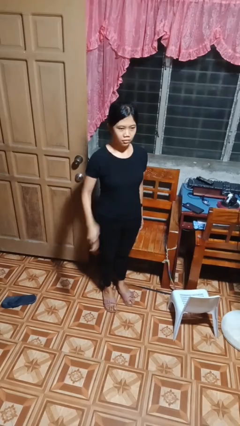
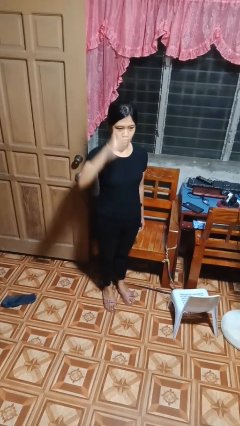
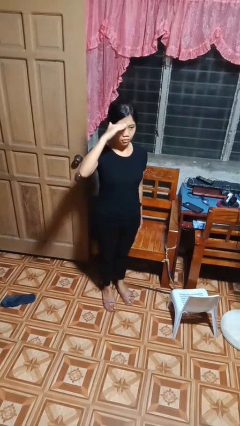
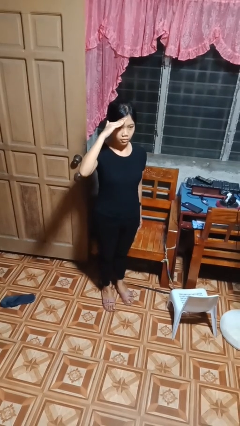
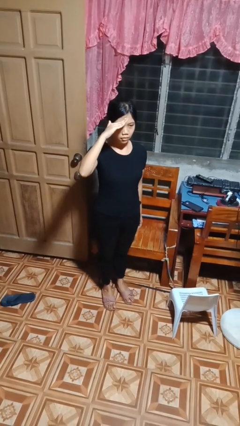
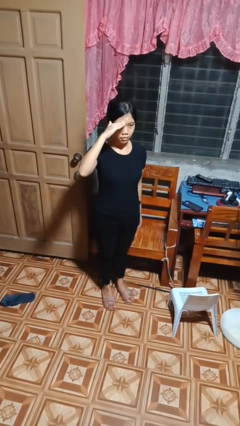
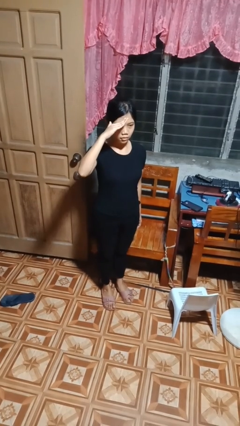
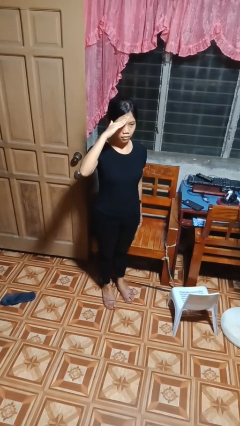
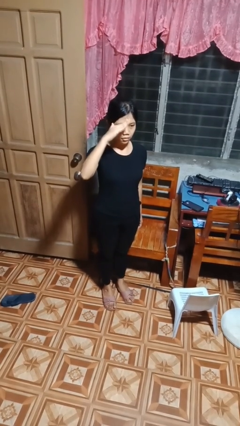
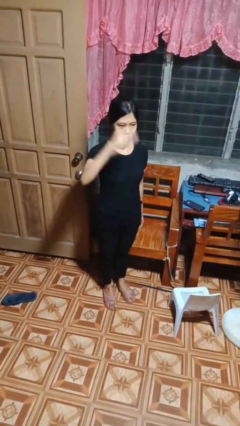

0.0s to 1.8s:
person salutes

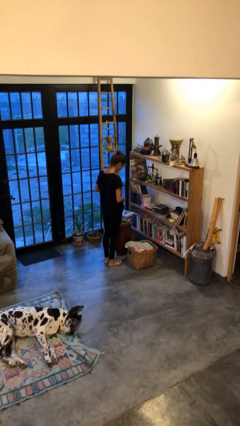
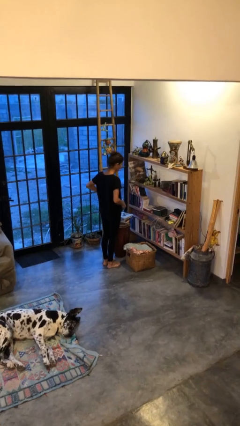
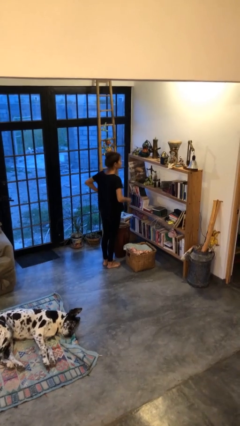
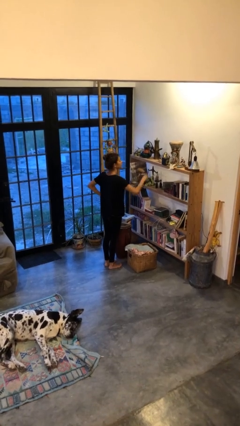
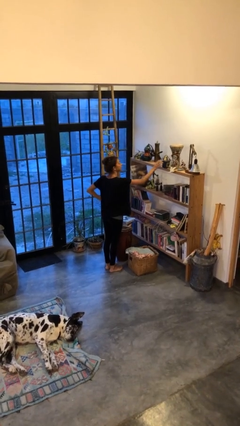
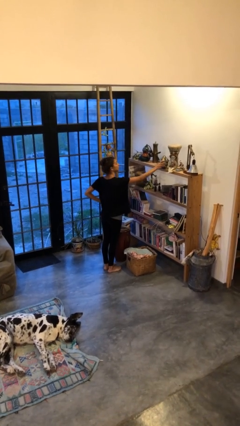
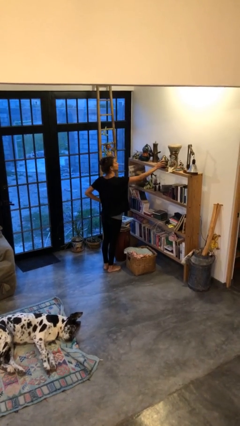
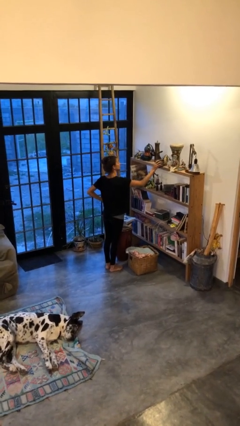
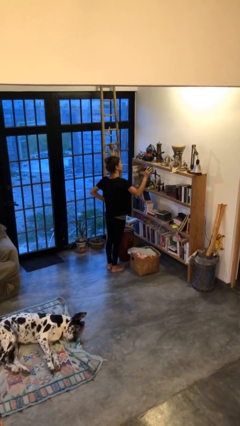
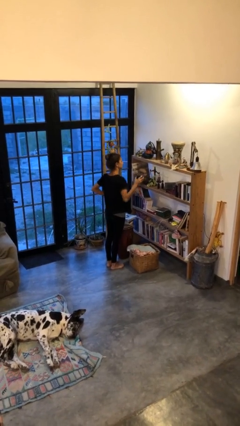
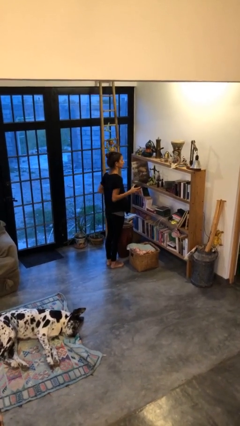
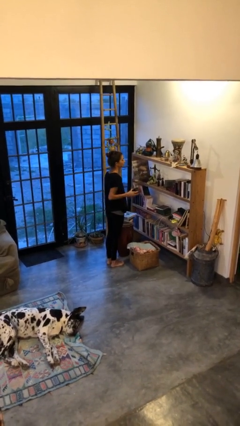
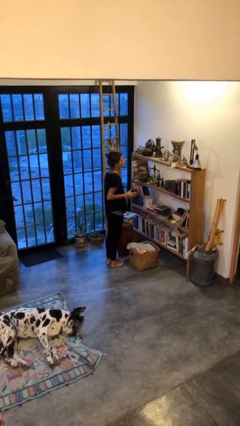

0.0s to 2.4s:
person picks up object from countertop

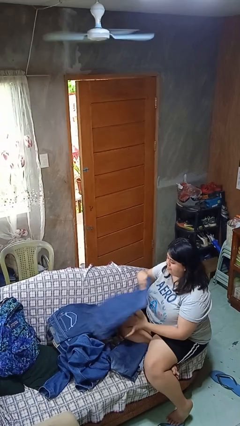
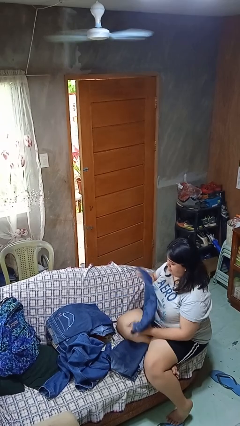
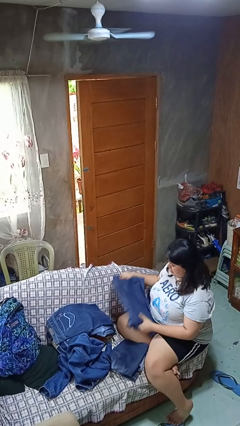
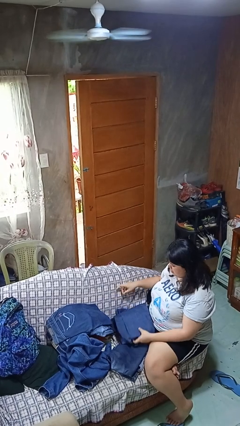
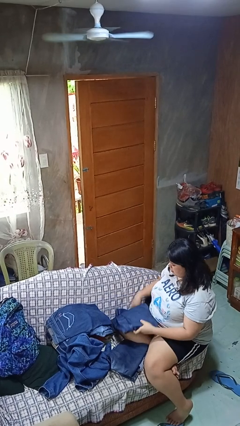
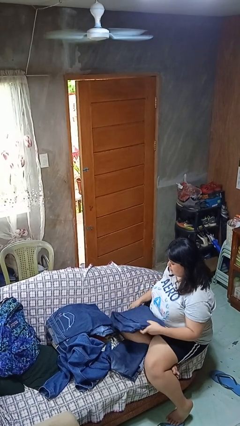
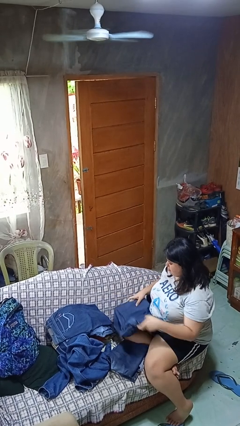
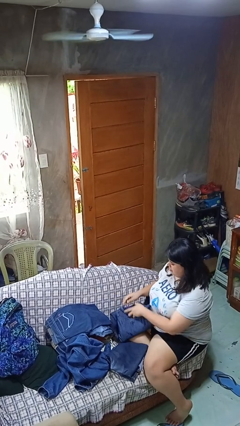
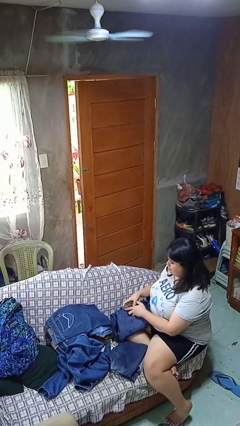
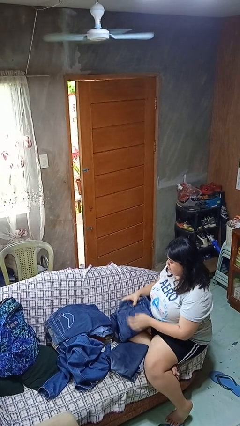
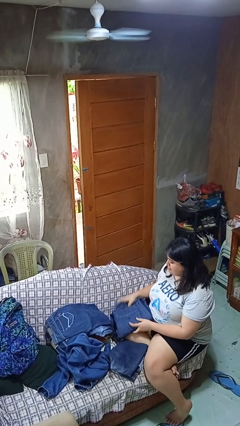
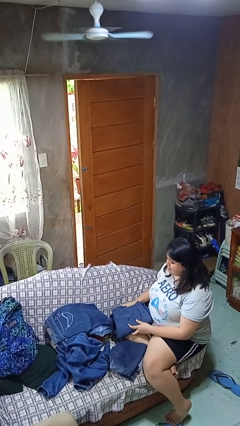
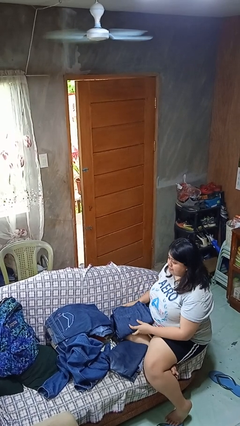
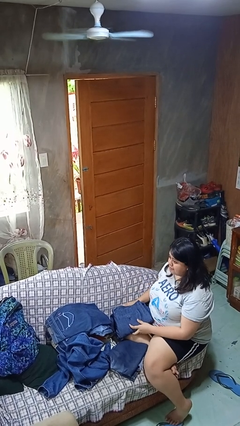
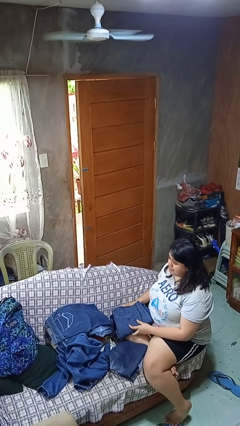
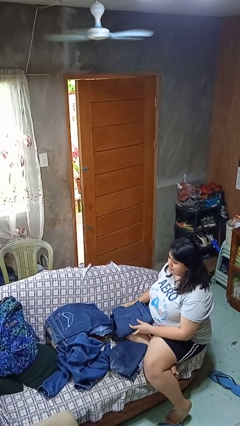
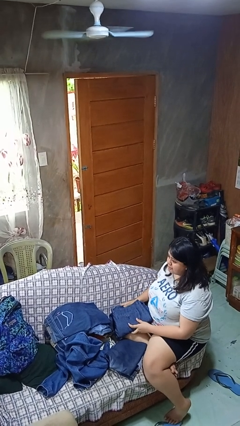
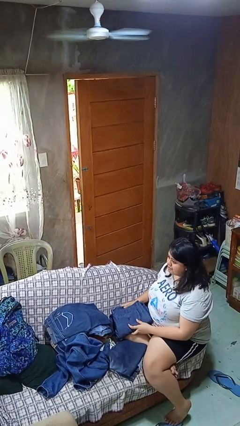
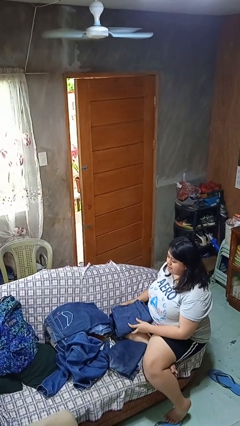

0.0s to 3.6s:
person folds pants

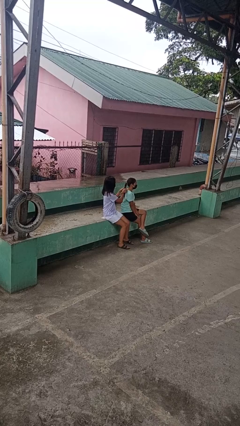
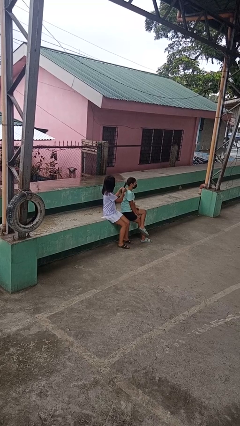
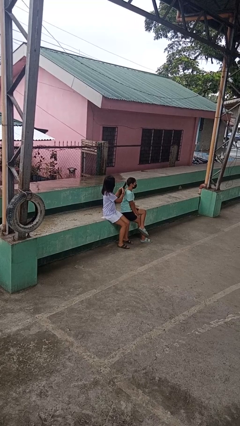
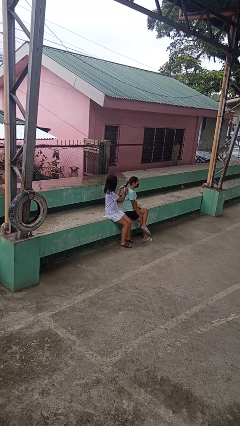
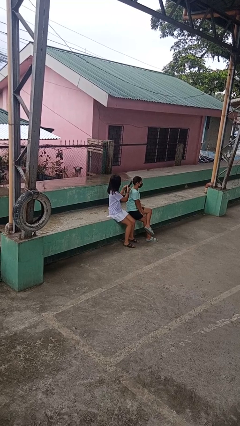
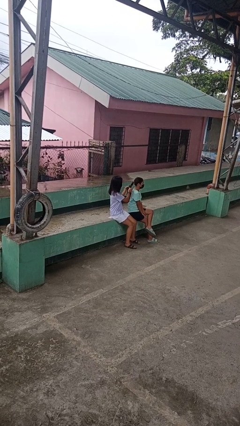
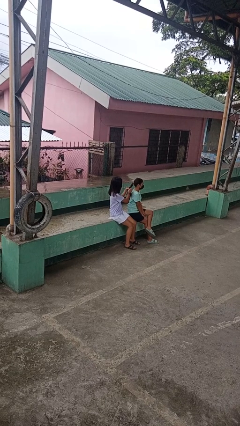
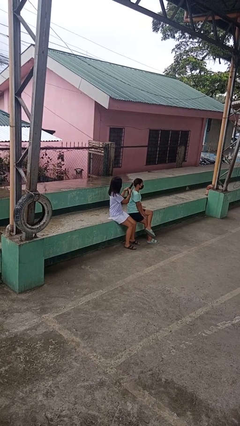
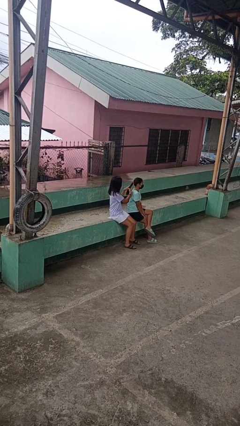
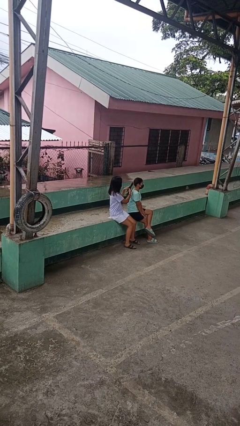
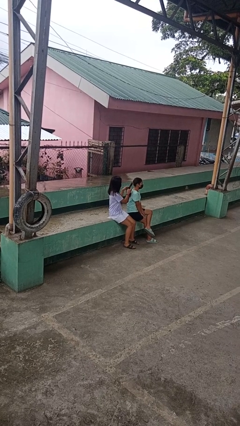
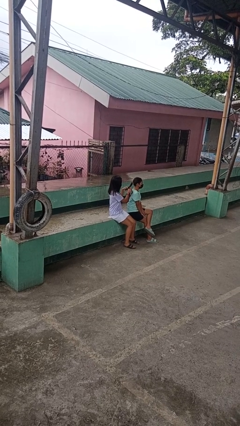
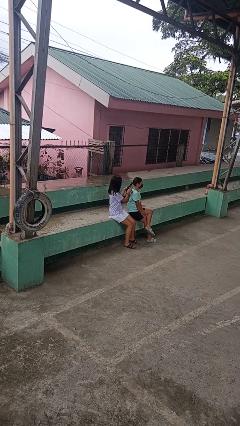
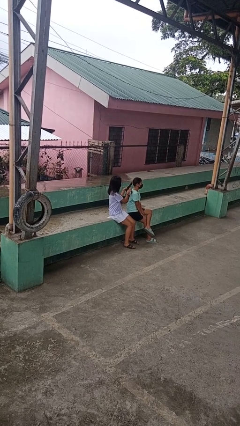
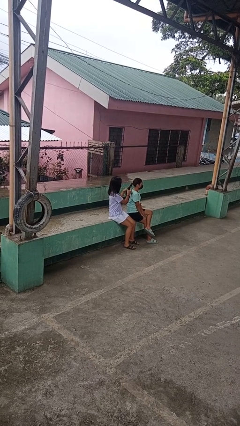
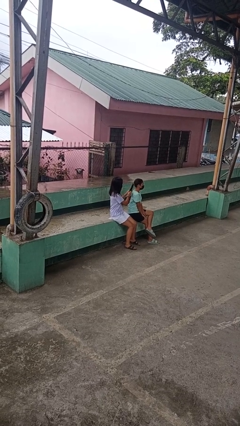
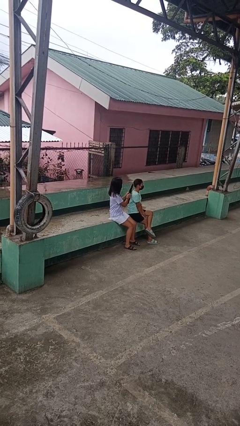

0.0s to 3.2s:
person braids hair of person

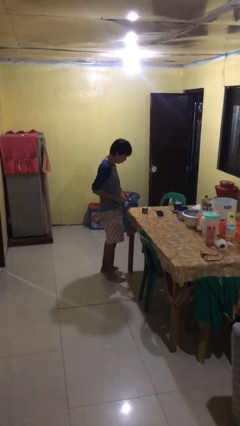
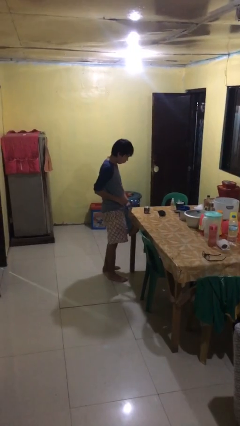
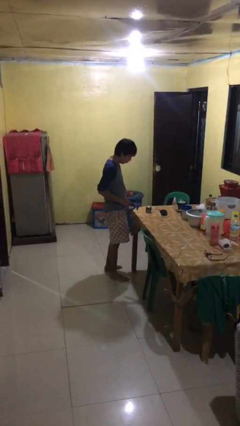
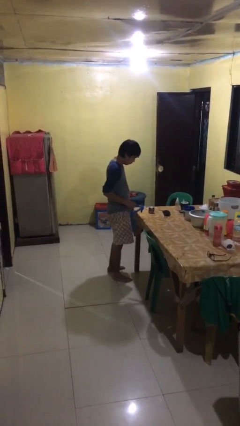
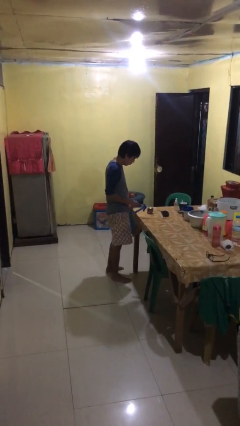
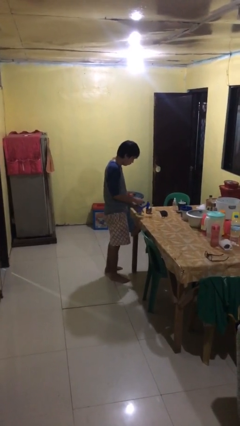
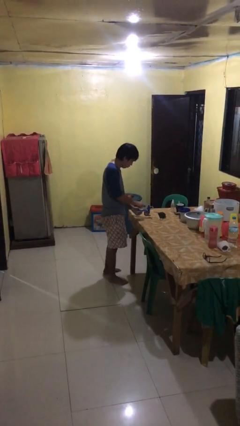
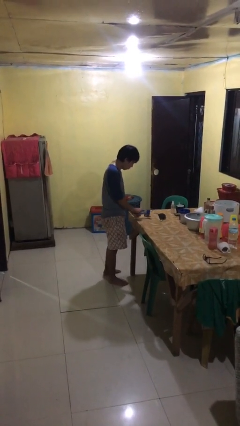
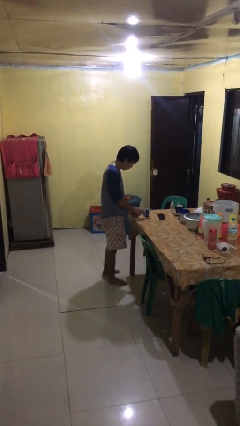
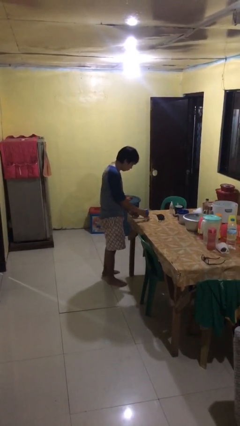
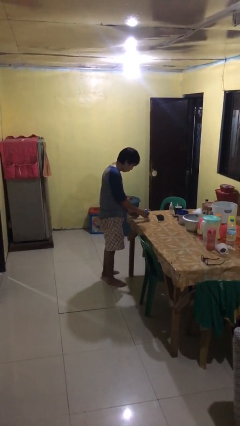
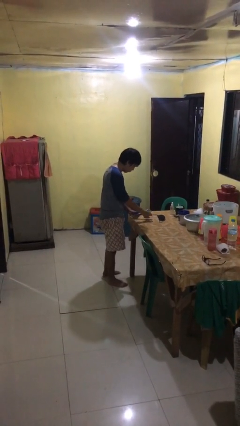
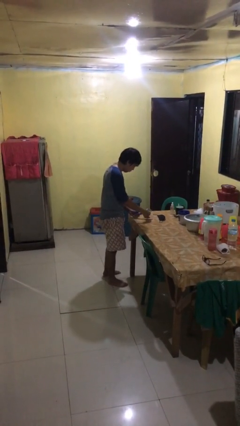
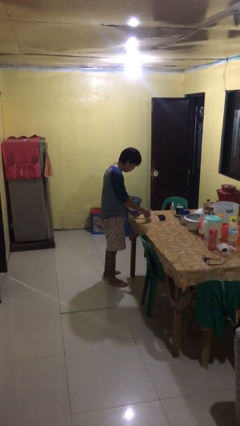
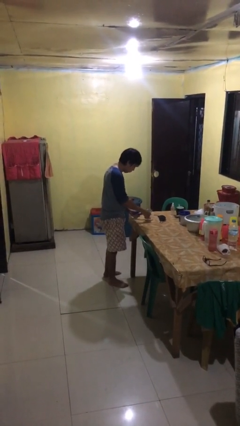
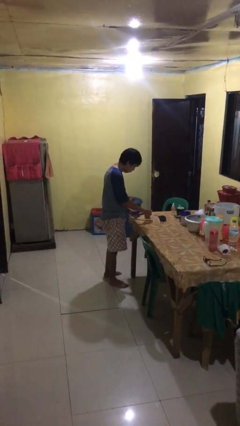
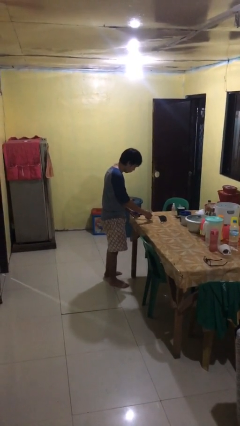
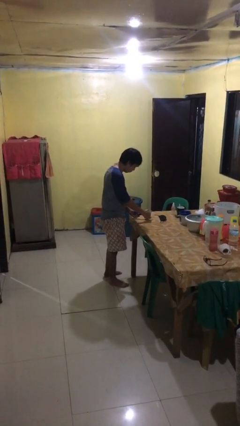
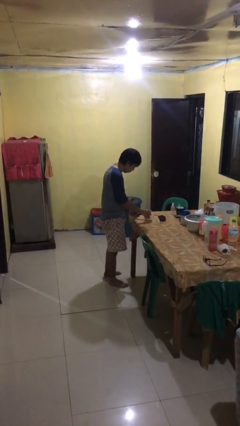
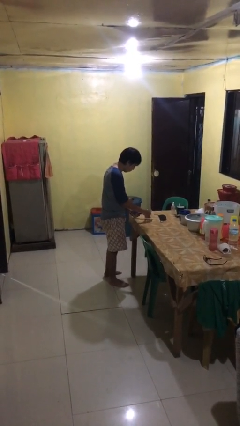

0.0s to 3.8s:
person opens can with can opener

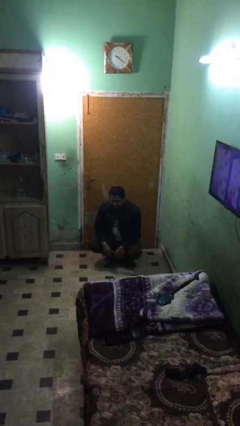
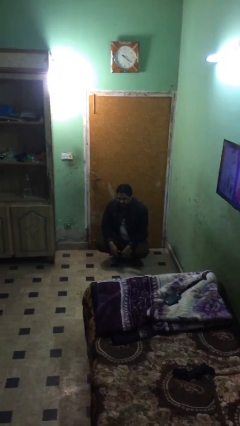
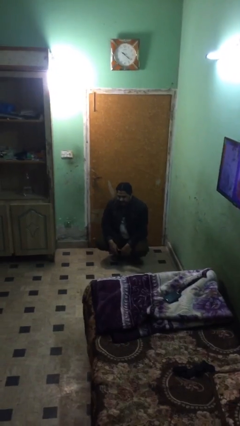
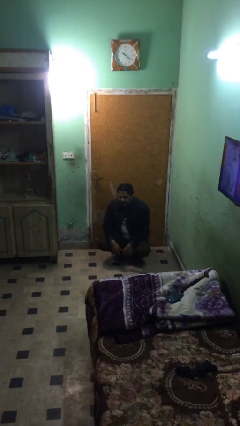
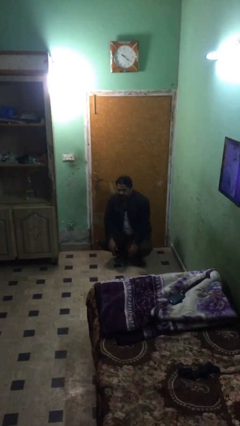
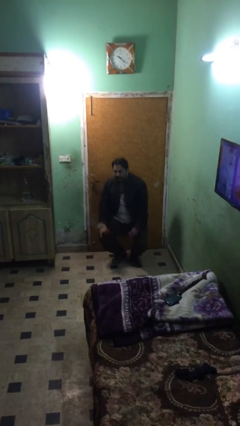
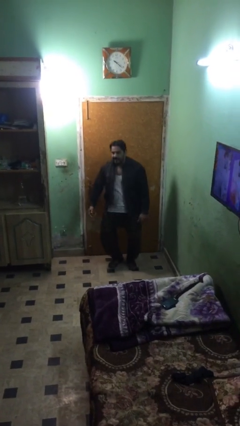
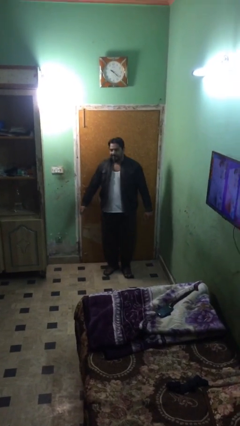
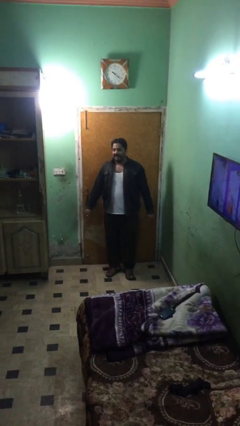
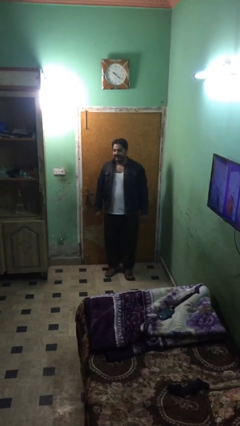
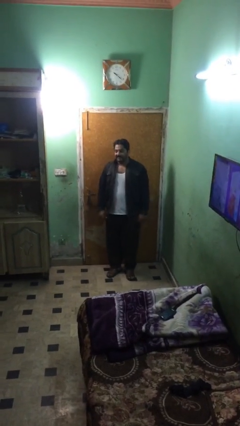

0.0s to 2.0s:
person stands up

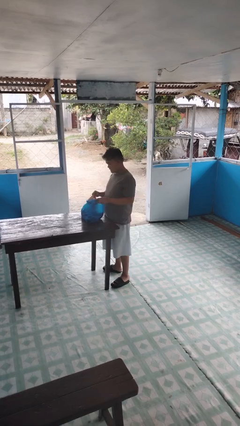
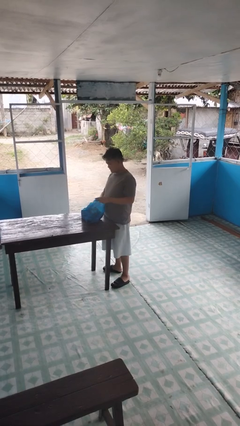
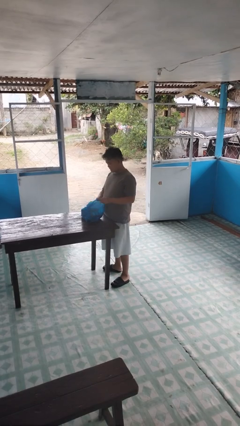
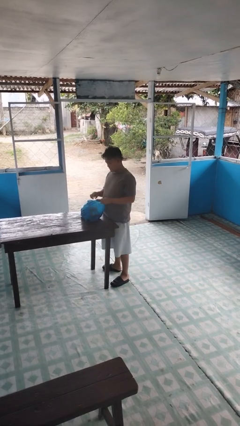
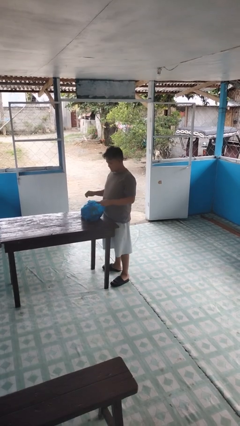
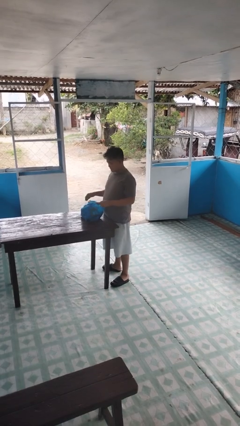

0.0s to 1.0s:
person puts object into bag
